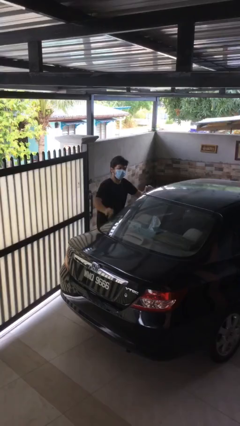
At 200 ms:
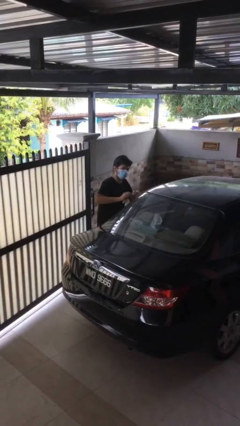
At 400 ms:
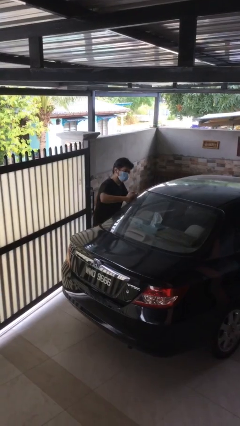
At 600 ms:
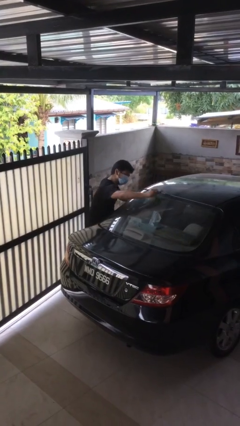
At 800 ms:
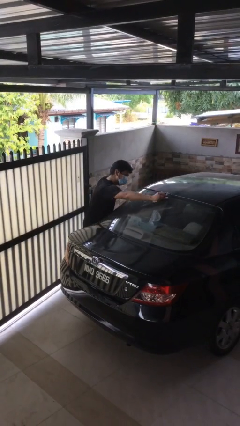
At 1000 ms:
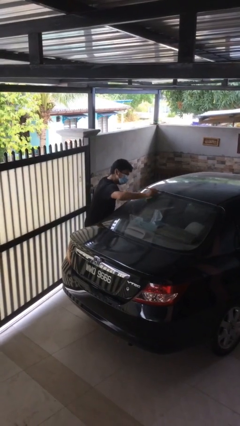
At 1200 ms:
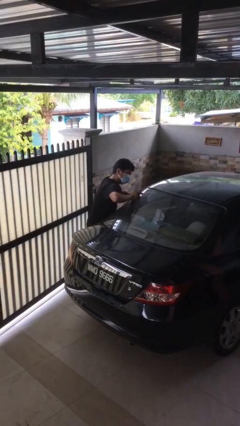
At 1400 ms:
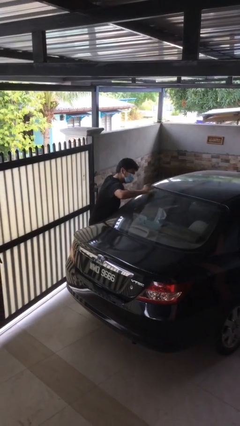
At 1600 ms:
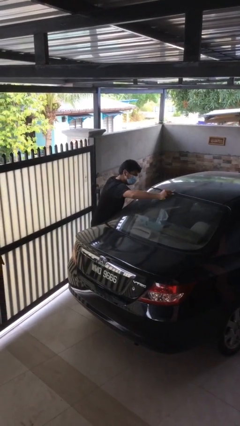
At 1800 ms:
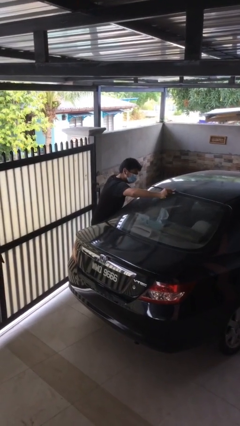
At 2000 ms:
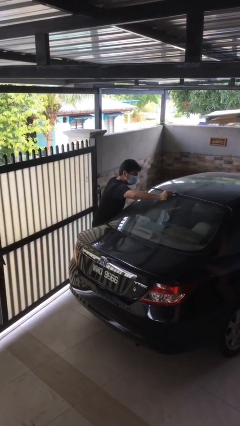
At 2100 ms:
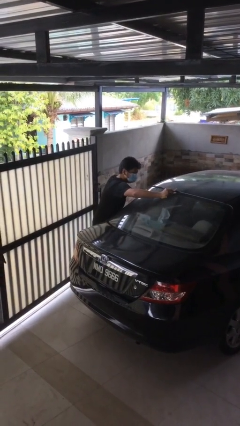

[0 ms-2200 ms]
person polishes car with rag

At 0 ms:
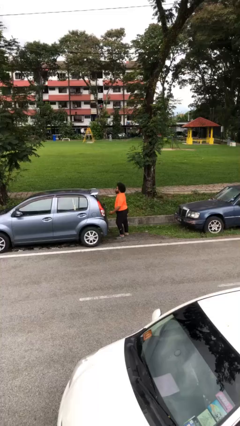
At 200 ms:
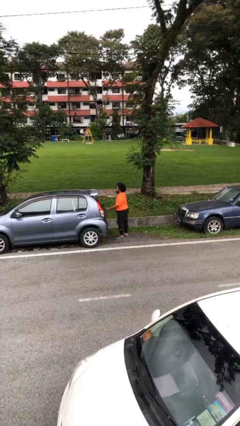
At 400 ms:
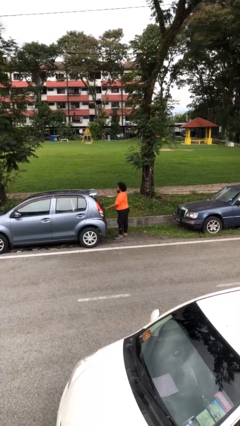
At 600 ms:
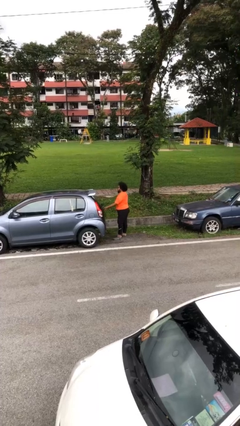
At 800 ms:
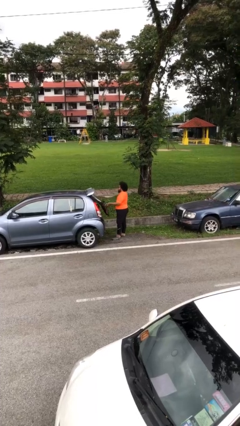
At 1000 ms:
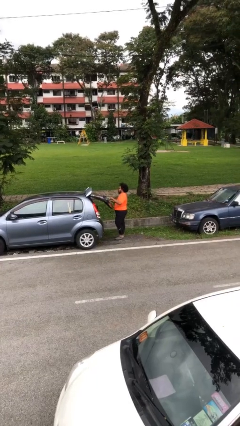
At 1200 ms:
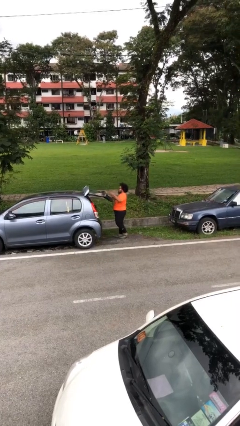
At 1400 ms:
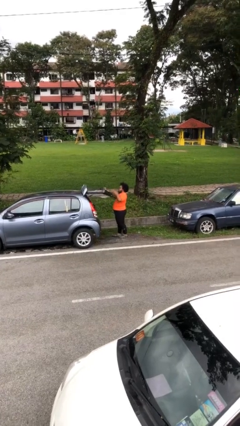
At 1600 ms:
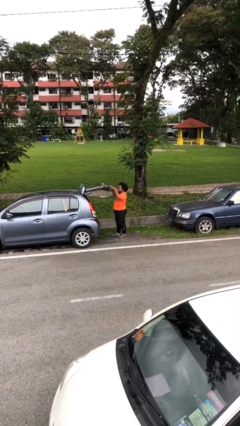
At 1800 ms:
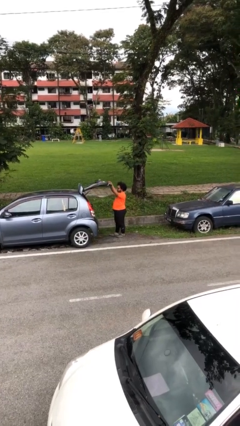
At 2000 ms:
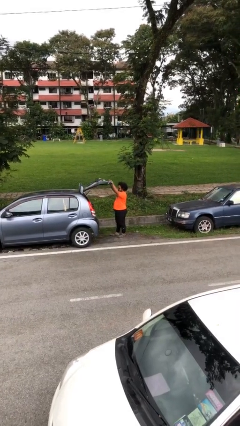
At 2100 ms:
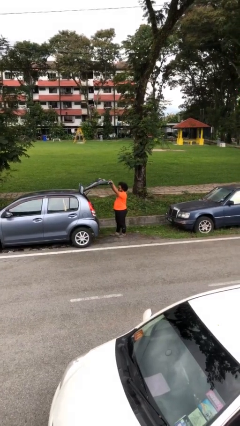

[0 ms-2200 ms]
person opens car trunk

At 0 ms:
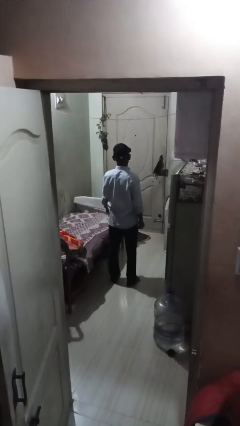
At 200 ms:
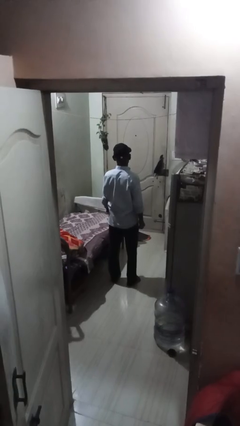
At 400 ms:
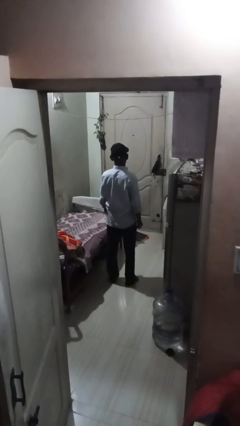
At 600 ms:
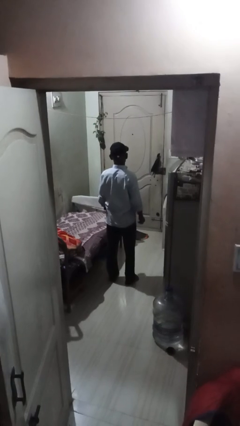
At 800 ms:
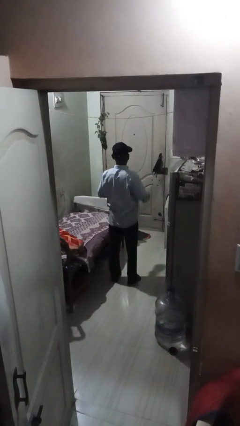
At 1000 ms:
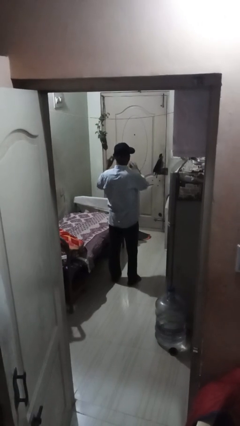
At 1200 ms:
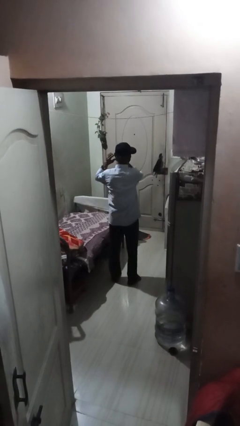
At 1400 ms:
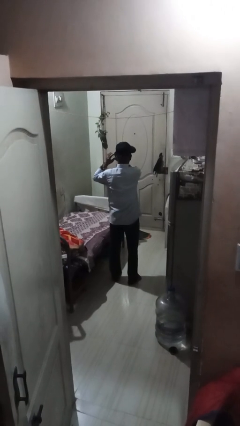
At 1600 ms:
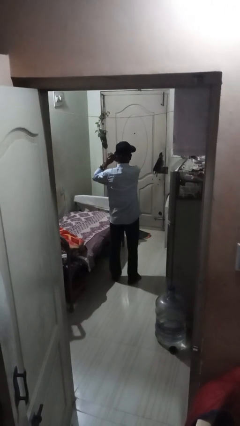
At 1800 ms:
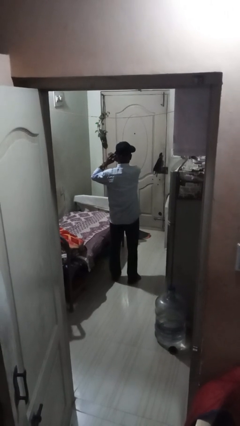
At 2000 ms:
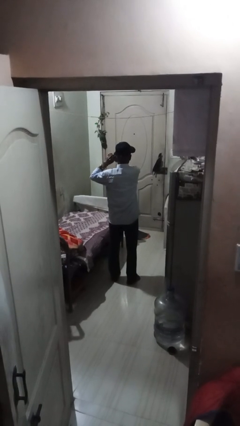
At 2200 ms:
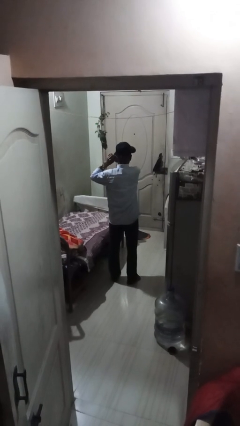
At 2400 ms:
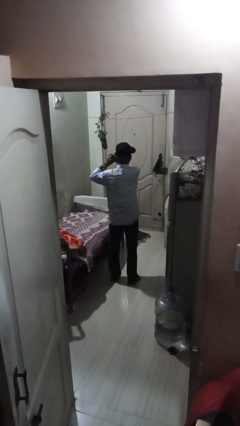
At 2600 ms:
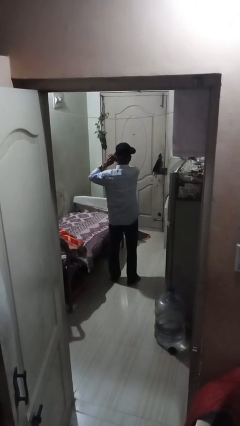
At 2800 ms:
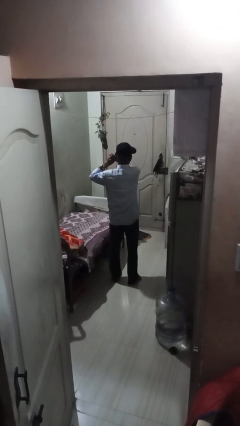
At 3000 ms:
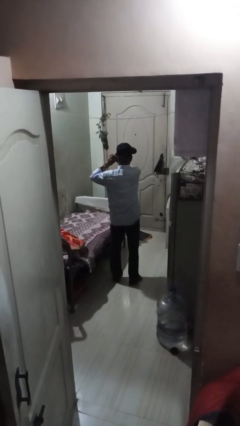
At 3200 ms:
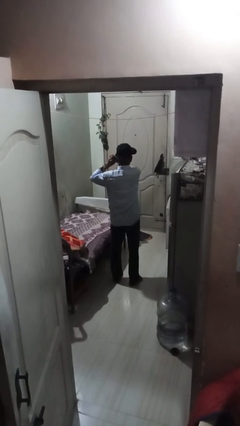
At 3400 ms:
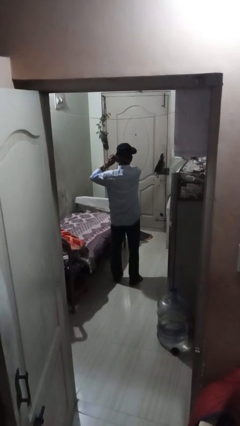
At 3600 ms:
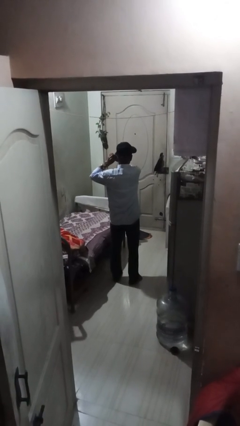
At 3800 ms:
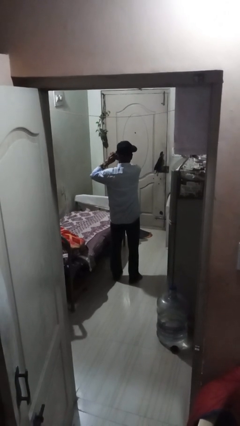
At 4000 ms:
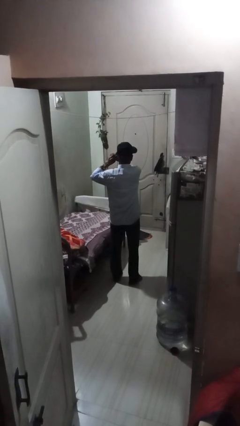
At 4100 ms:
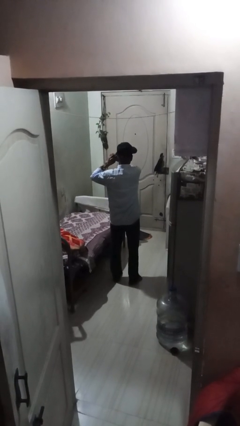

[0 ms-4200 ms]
person puts on earrings

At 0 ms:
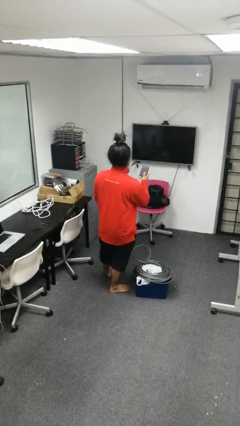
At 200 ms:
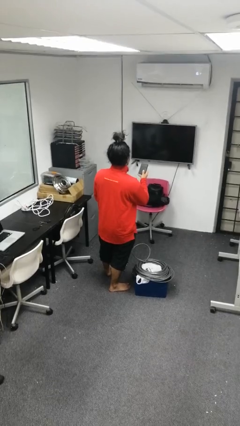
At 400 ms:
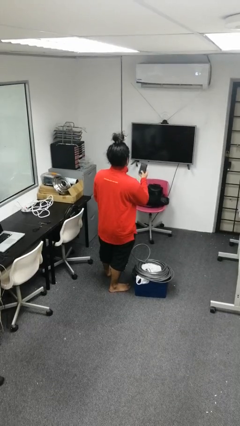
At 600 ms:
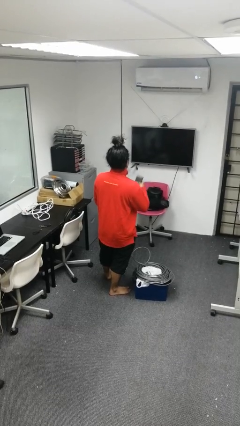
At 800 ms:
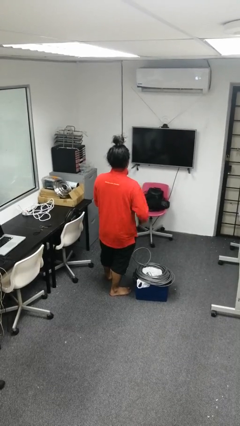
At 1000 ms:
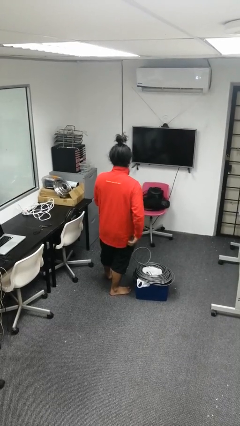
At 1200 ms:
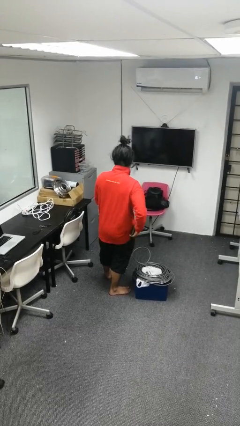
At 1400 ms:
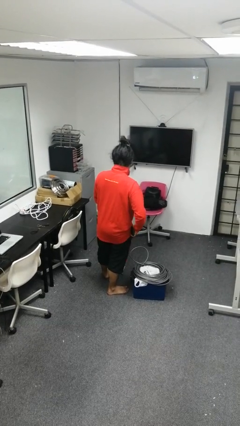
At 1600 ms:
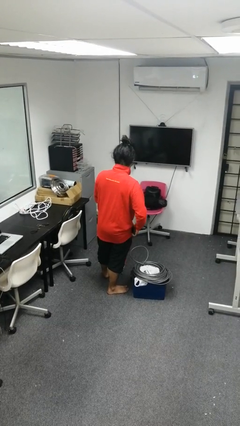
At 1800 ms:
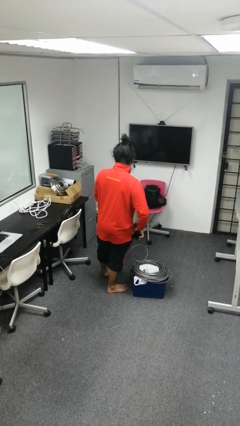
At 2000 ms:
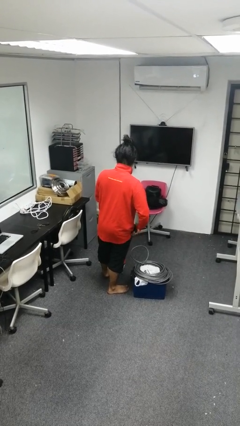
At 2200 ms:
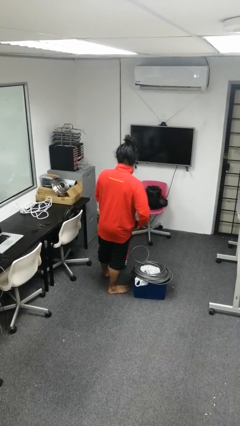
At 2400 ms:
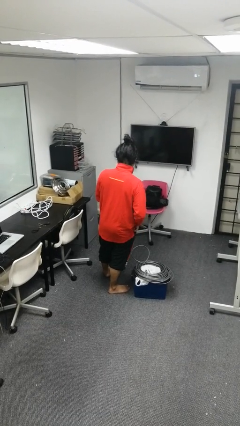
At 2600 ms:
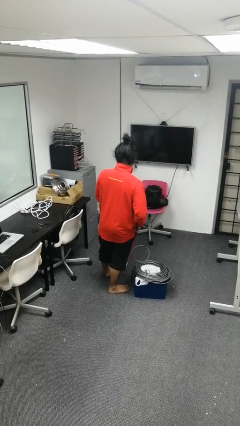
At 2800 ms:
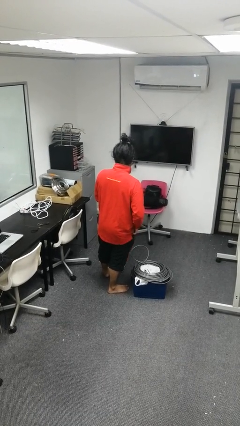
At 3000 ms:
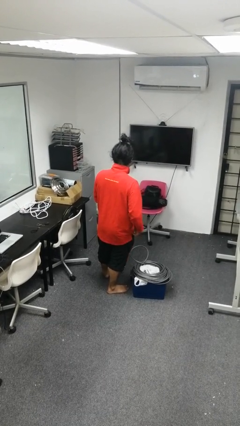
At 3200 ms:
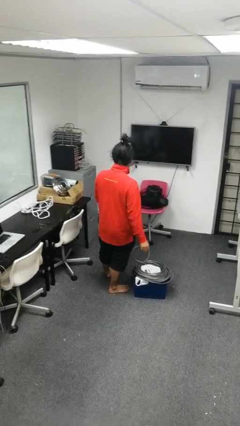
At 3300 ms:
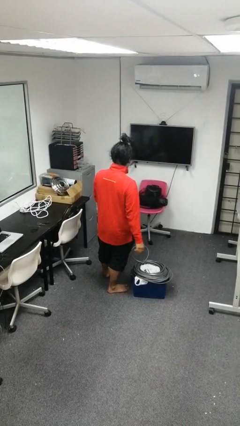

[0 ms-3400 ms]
person puts phone into pocket

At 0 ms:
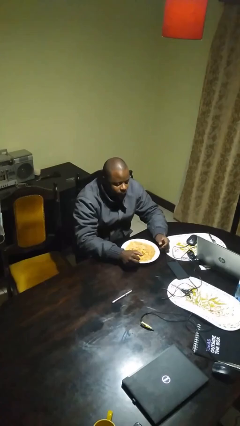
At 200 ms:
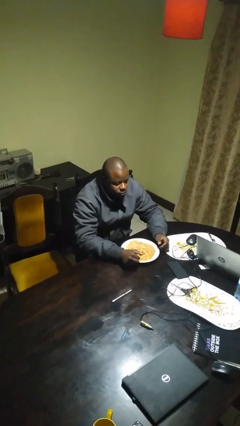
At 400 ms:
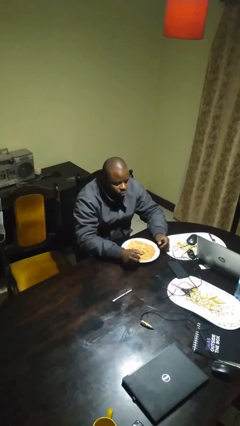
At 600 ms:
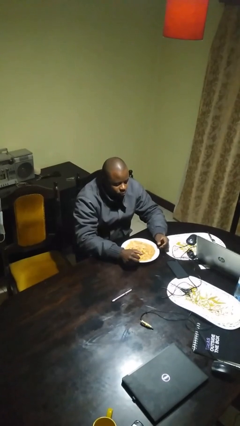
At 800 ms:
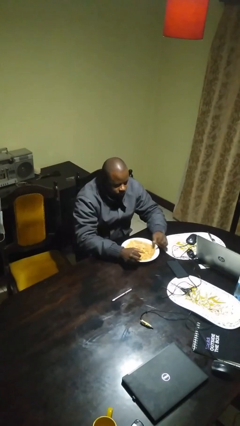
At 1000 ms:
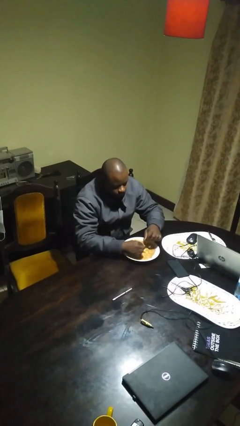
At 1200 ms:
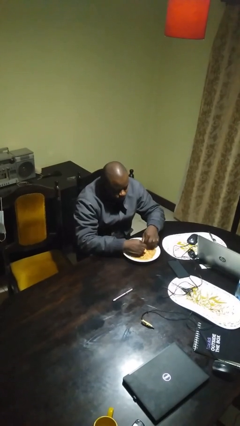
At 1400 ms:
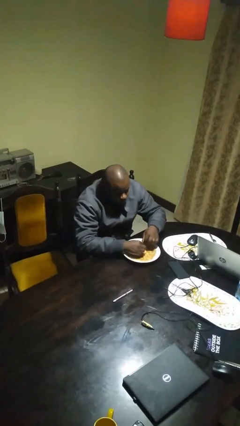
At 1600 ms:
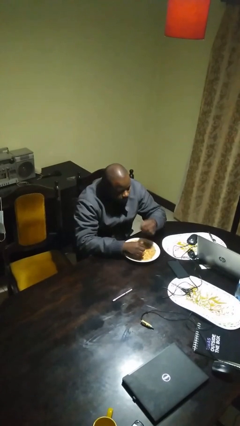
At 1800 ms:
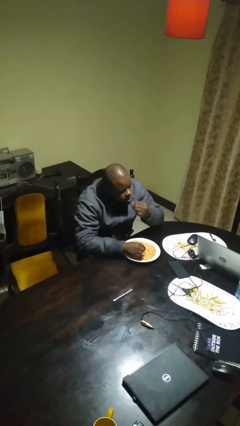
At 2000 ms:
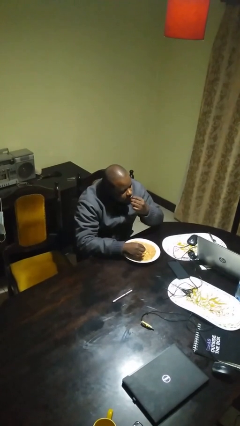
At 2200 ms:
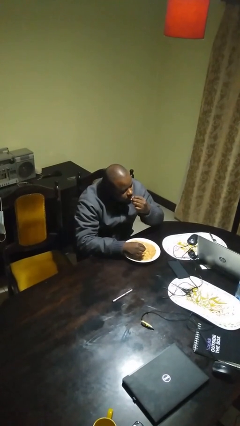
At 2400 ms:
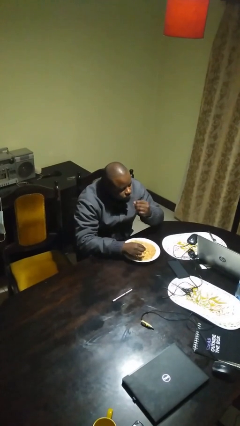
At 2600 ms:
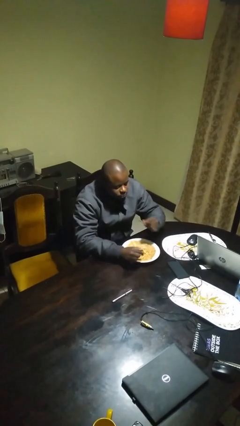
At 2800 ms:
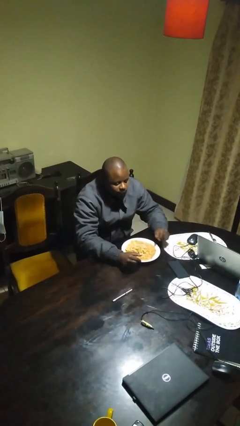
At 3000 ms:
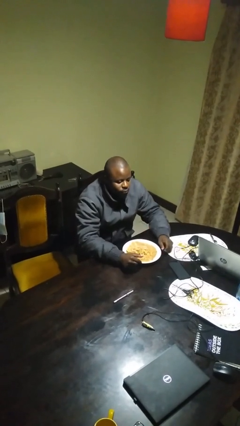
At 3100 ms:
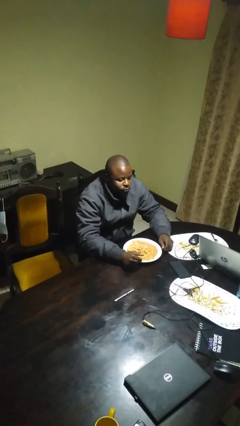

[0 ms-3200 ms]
person eats with hands

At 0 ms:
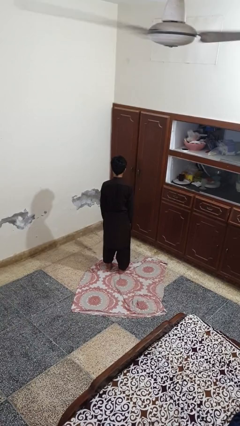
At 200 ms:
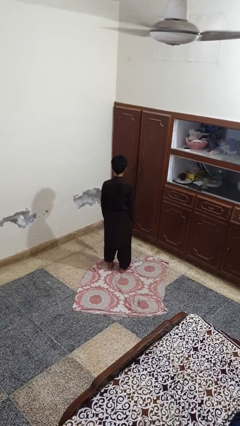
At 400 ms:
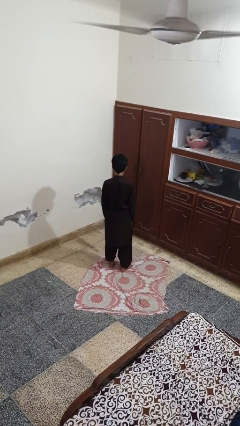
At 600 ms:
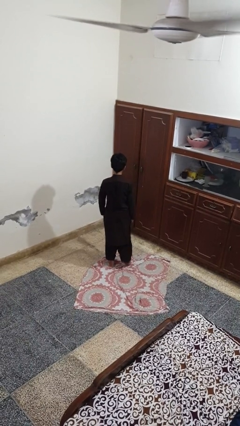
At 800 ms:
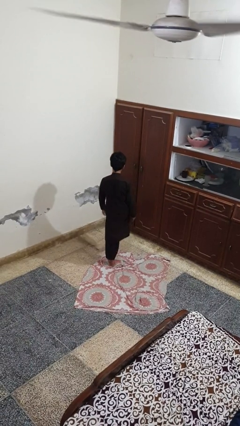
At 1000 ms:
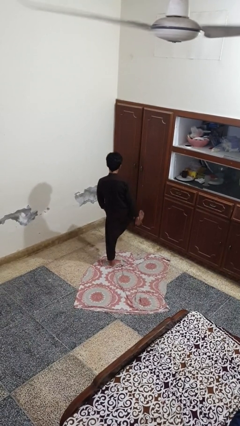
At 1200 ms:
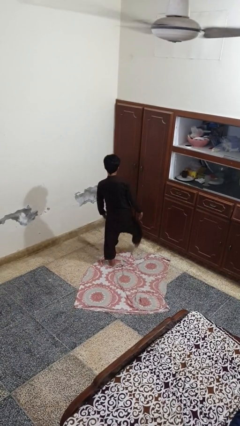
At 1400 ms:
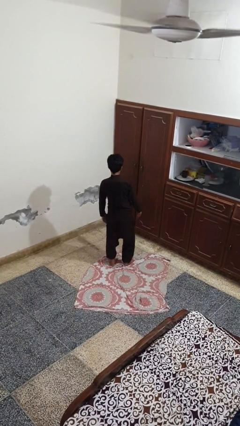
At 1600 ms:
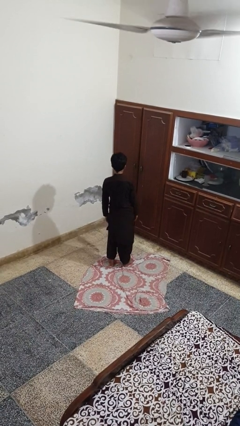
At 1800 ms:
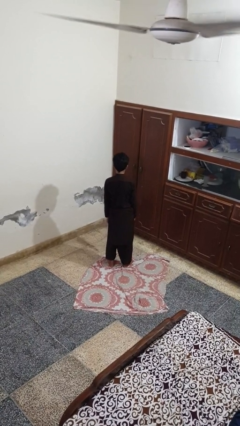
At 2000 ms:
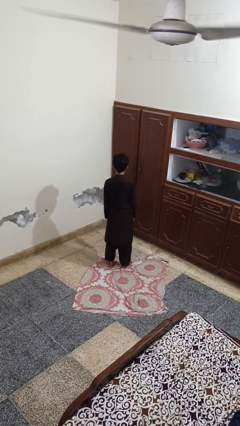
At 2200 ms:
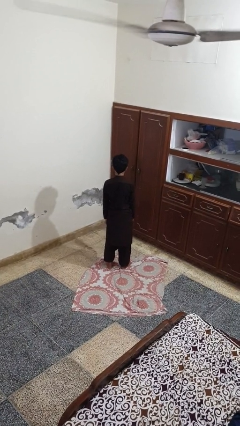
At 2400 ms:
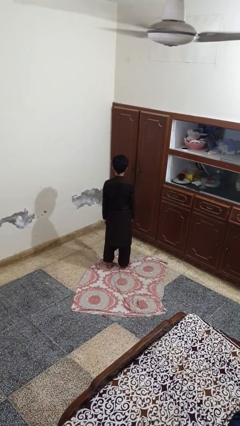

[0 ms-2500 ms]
person karate kicks
